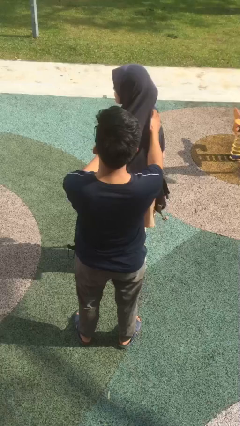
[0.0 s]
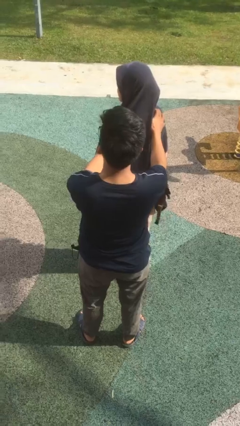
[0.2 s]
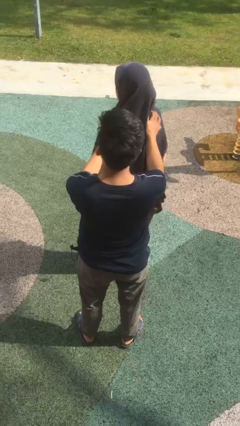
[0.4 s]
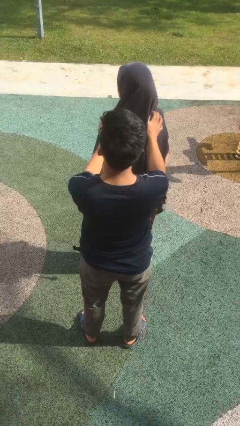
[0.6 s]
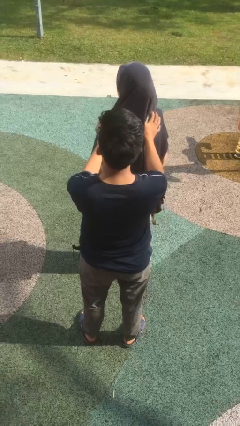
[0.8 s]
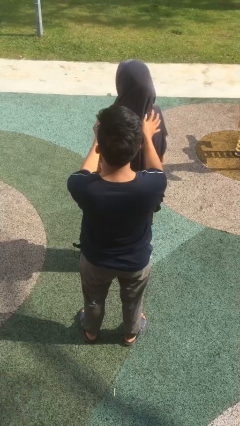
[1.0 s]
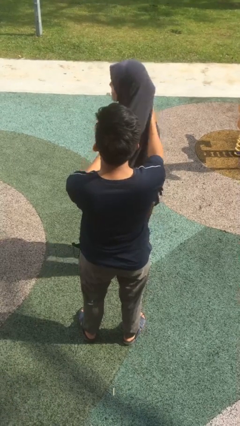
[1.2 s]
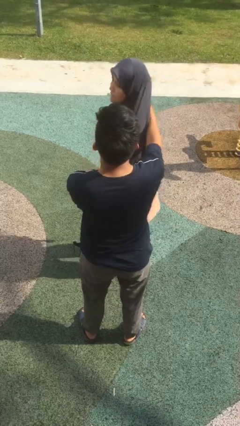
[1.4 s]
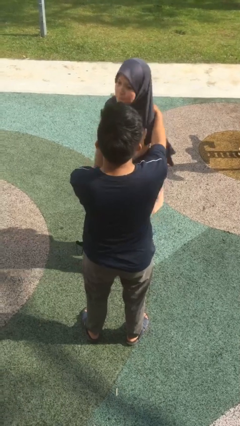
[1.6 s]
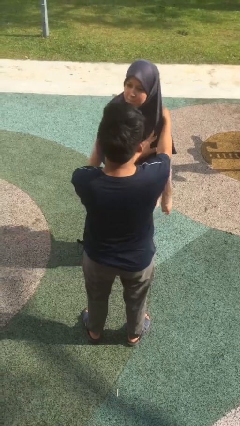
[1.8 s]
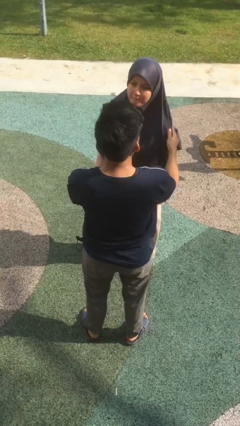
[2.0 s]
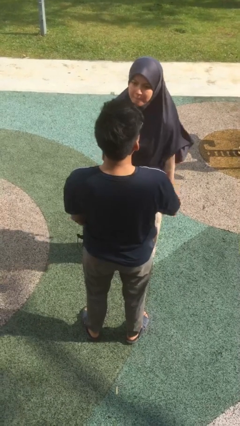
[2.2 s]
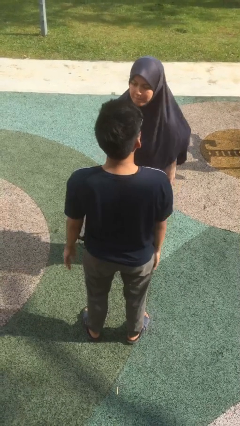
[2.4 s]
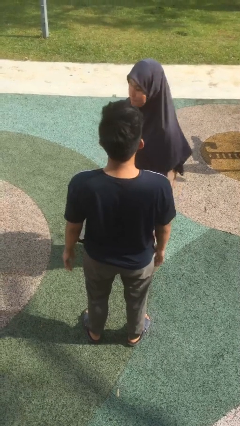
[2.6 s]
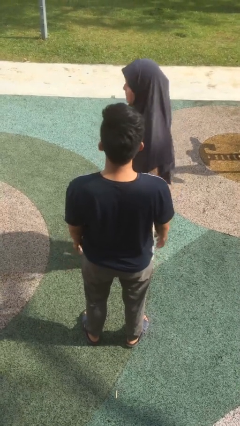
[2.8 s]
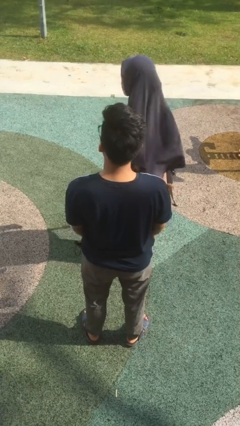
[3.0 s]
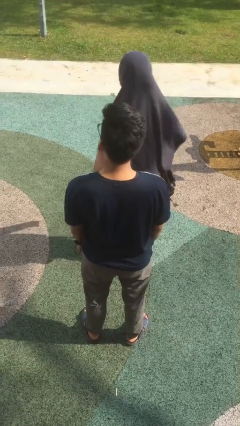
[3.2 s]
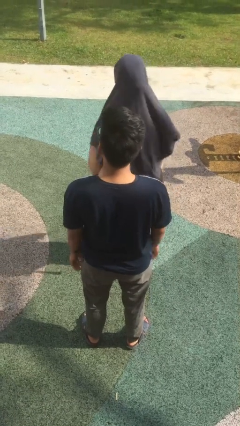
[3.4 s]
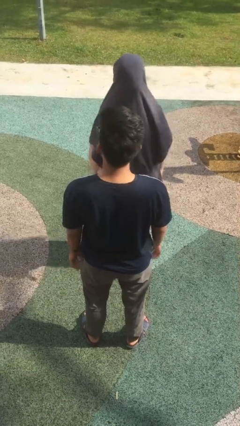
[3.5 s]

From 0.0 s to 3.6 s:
person spins person around

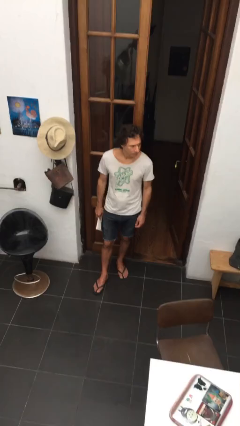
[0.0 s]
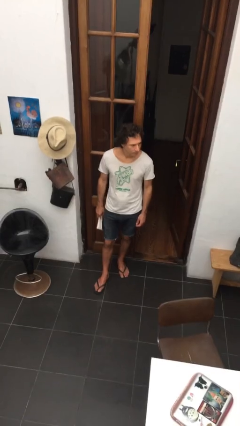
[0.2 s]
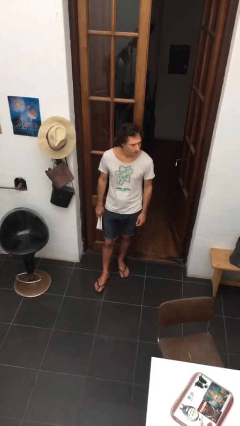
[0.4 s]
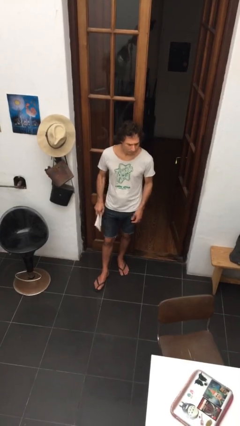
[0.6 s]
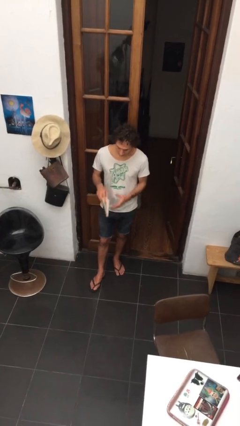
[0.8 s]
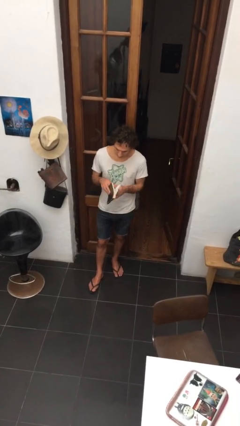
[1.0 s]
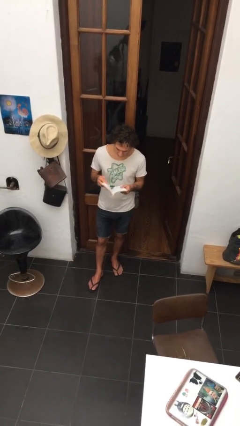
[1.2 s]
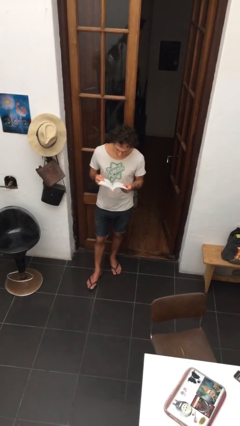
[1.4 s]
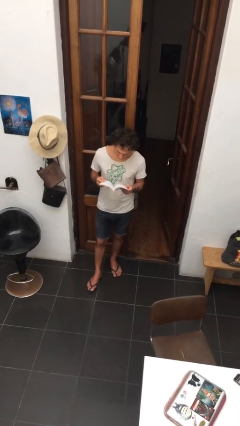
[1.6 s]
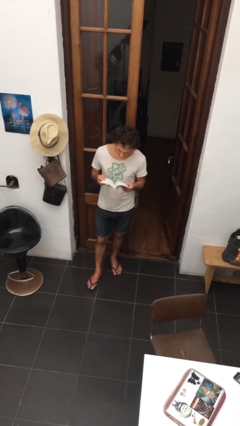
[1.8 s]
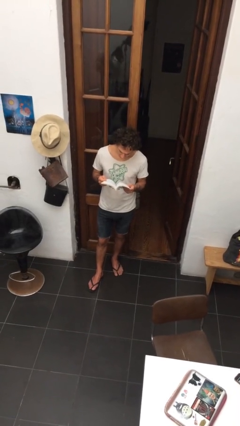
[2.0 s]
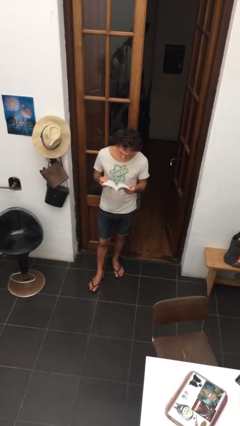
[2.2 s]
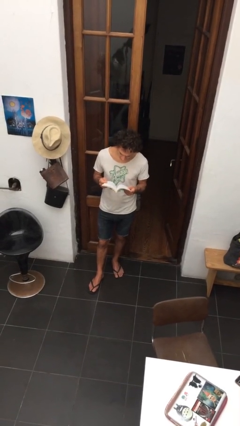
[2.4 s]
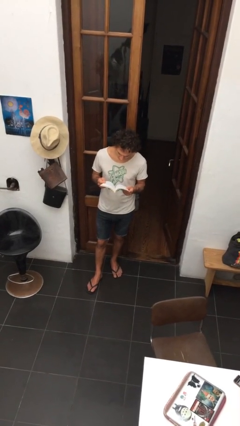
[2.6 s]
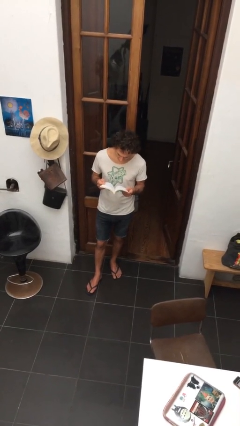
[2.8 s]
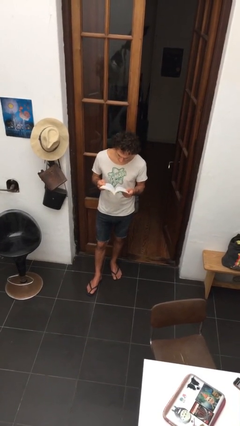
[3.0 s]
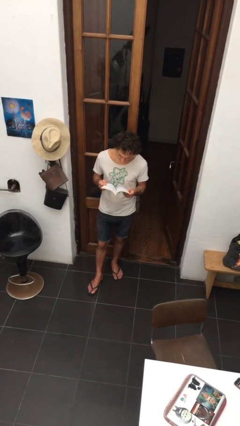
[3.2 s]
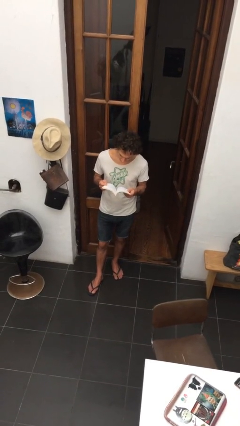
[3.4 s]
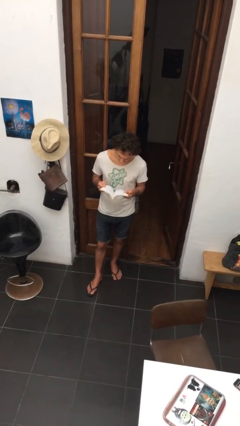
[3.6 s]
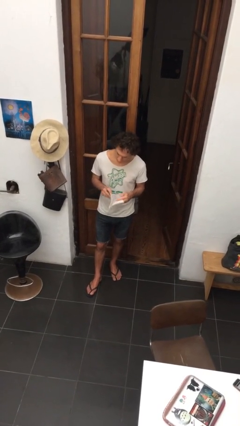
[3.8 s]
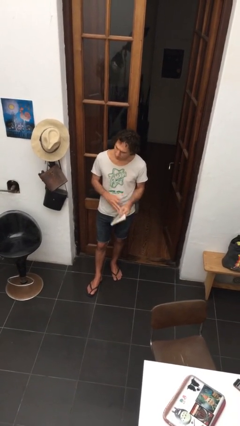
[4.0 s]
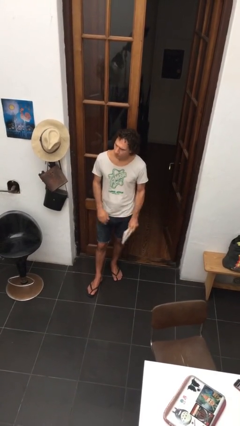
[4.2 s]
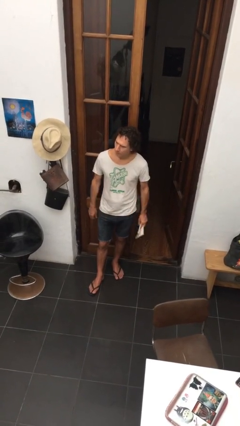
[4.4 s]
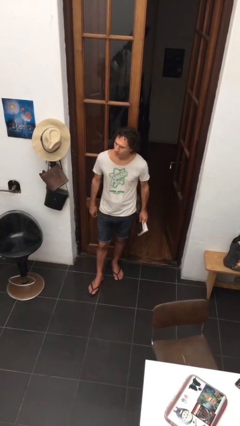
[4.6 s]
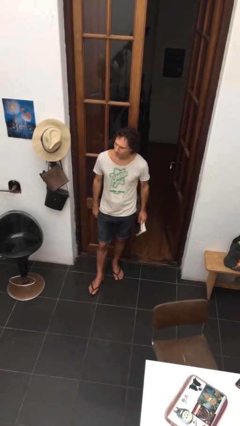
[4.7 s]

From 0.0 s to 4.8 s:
person reads document

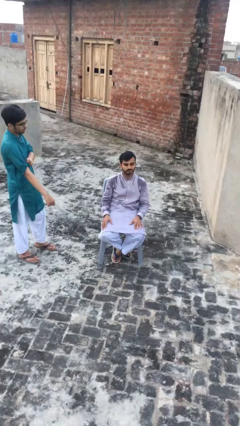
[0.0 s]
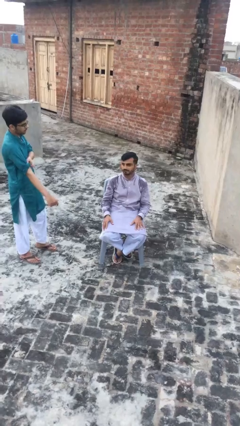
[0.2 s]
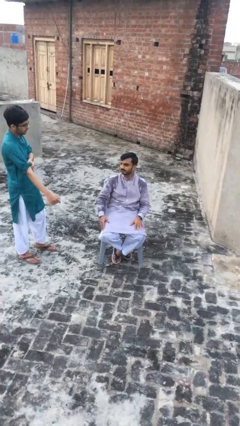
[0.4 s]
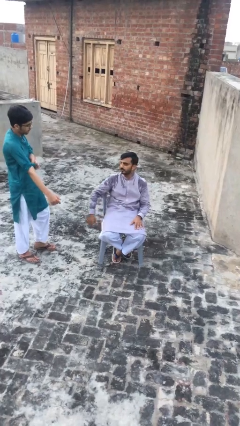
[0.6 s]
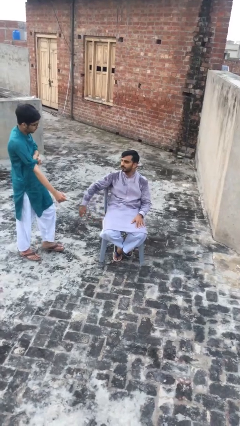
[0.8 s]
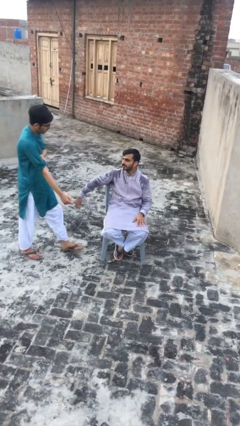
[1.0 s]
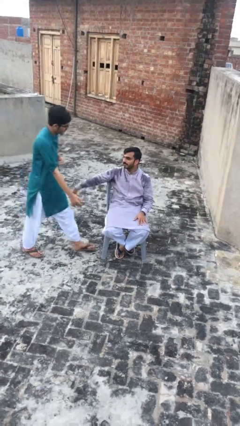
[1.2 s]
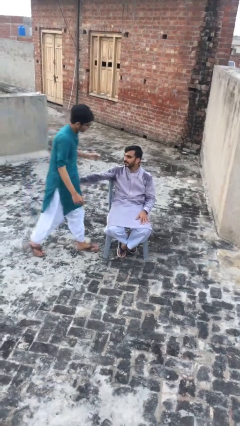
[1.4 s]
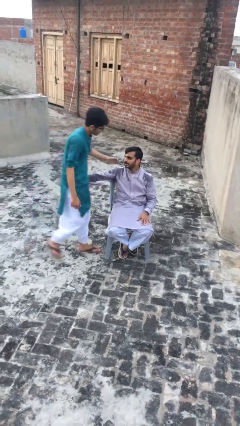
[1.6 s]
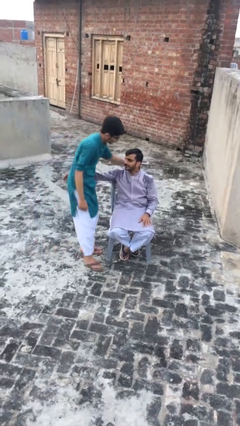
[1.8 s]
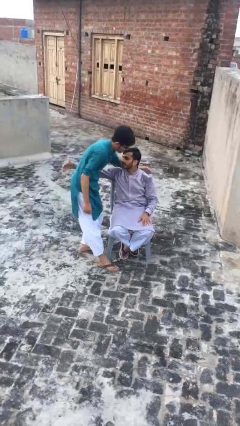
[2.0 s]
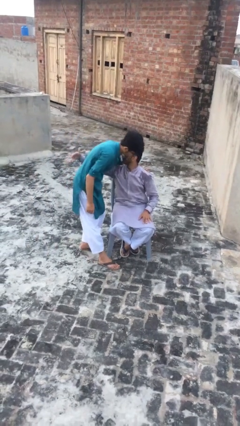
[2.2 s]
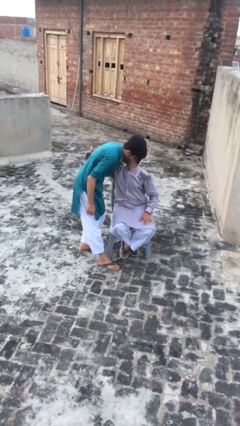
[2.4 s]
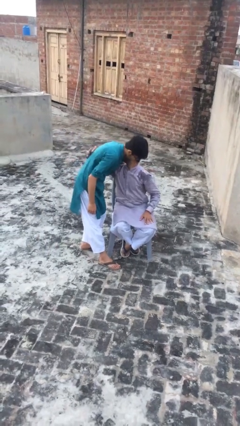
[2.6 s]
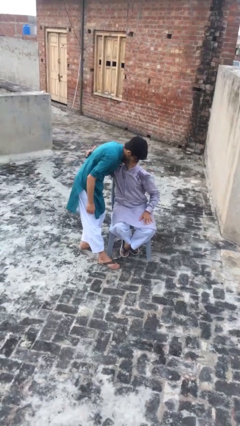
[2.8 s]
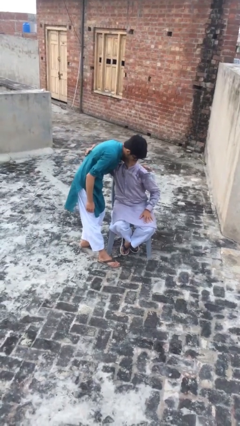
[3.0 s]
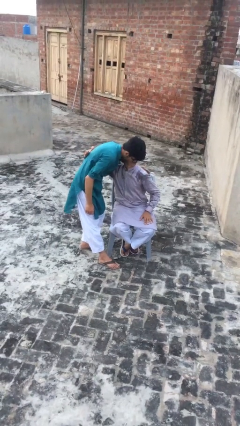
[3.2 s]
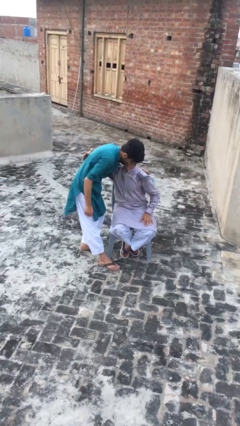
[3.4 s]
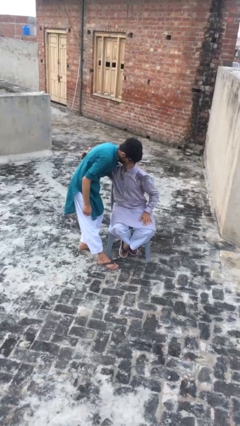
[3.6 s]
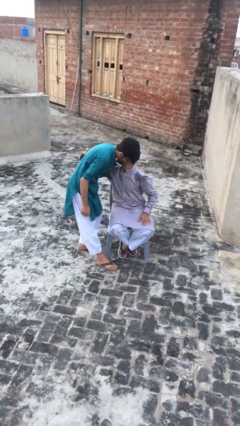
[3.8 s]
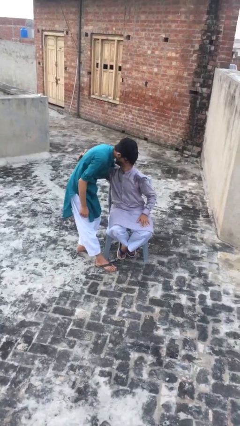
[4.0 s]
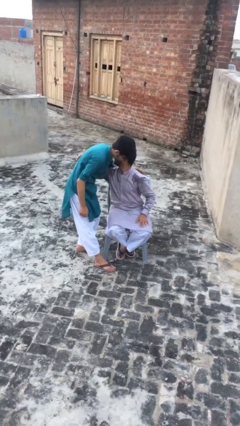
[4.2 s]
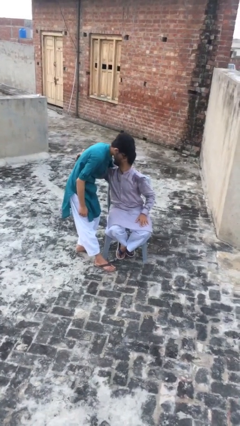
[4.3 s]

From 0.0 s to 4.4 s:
person embraces person

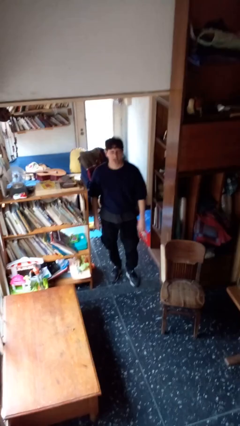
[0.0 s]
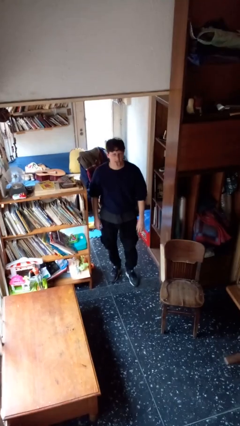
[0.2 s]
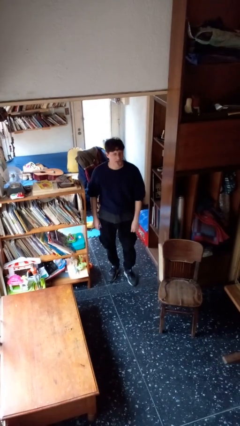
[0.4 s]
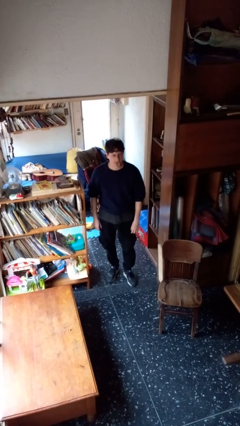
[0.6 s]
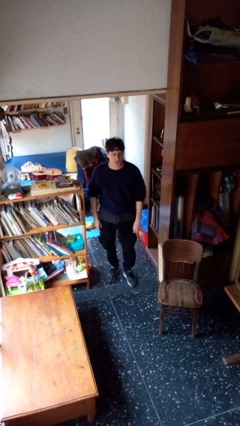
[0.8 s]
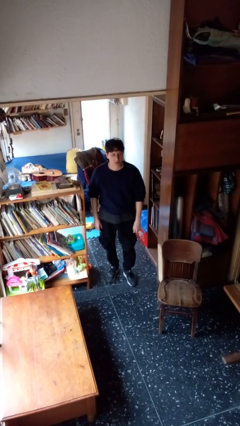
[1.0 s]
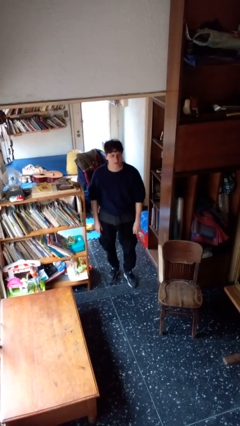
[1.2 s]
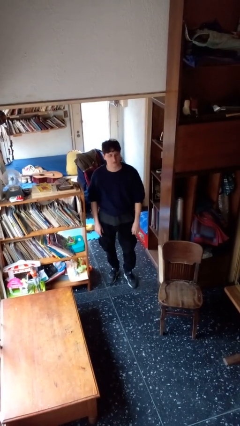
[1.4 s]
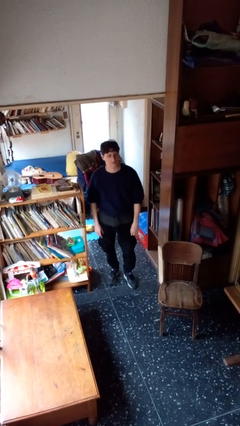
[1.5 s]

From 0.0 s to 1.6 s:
person sticks out tongue

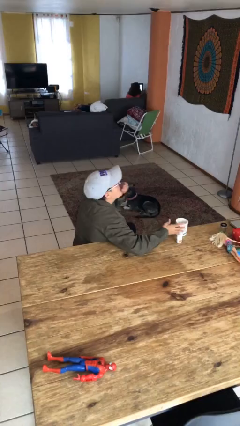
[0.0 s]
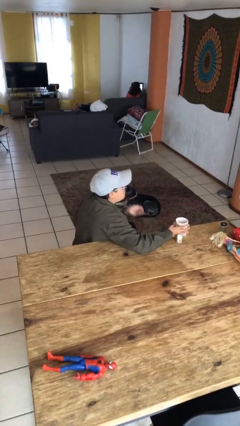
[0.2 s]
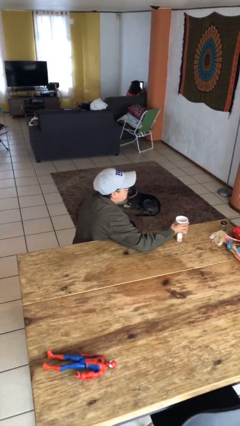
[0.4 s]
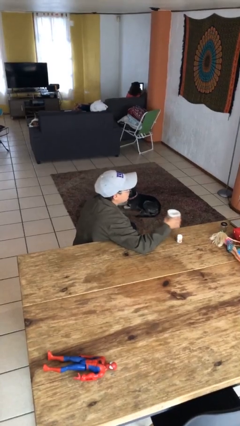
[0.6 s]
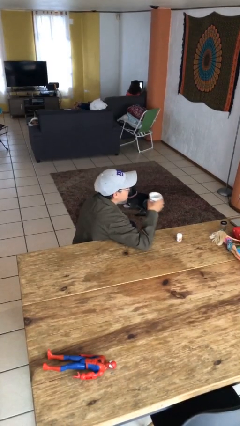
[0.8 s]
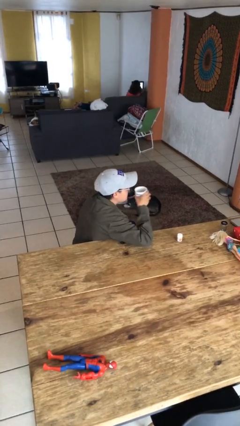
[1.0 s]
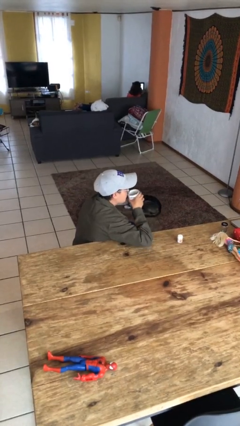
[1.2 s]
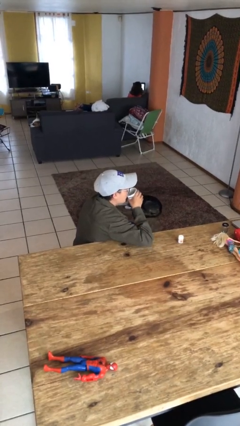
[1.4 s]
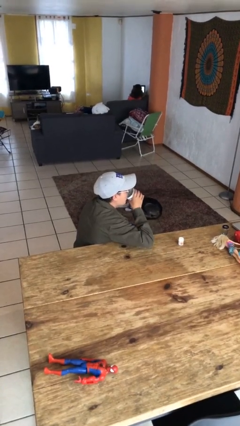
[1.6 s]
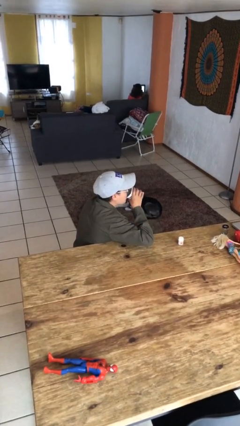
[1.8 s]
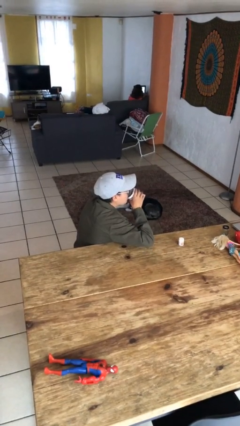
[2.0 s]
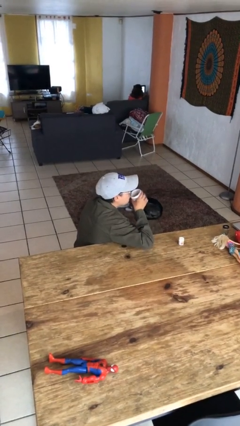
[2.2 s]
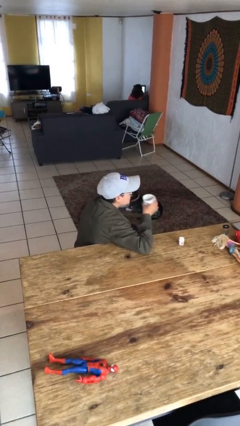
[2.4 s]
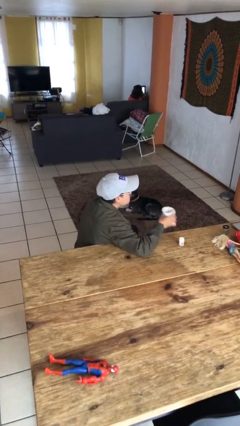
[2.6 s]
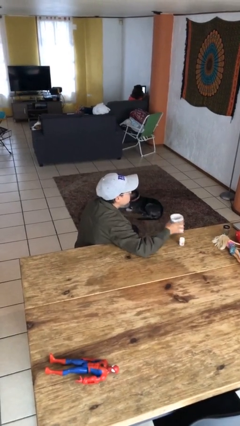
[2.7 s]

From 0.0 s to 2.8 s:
person drinks from cup

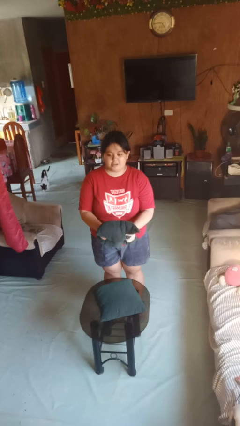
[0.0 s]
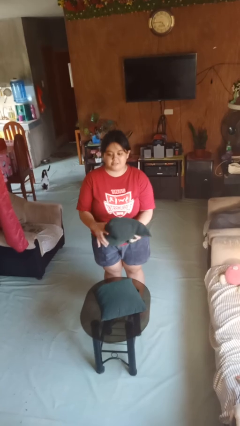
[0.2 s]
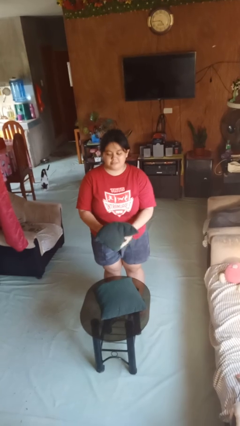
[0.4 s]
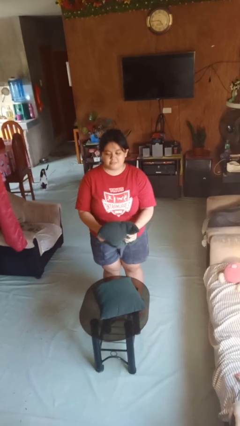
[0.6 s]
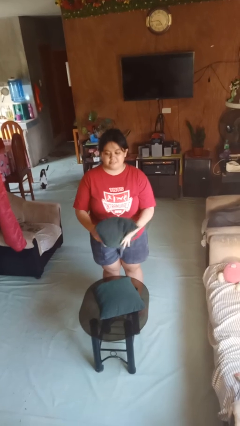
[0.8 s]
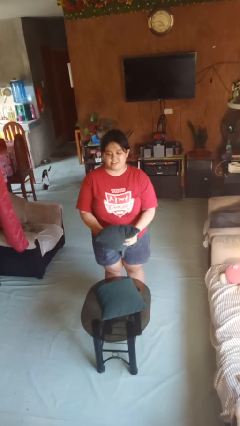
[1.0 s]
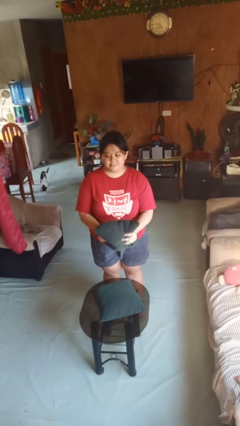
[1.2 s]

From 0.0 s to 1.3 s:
person squeezes object
